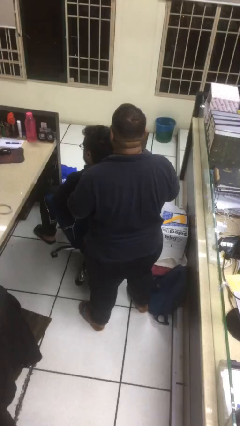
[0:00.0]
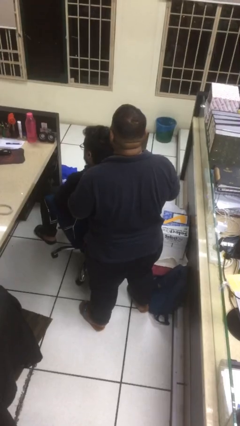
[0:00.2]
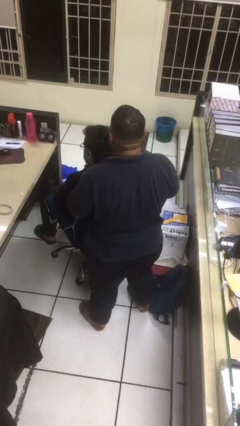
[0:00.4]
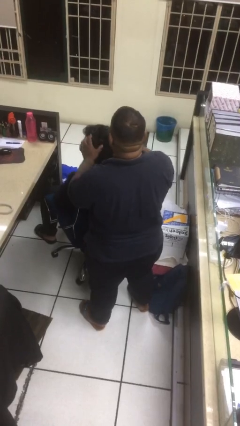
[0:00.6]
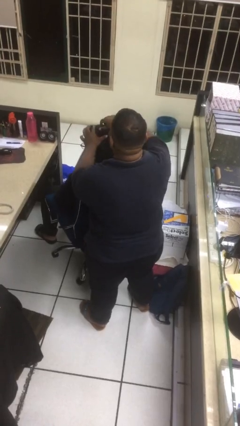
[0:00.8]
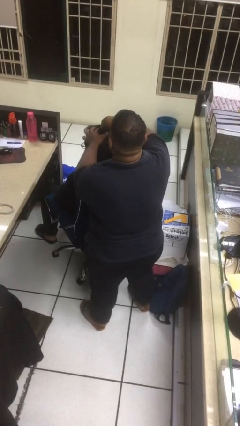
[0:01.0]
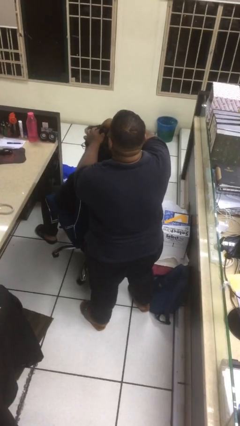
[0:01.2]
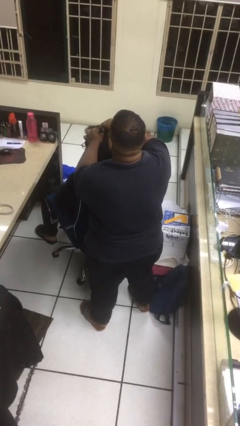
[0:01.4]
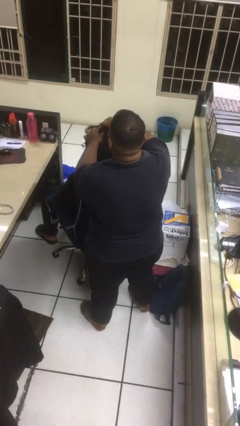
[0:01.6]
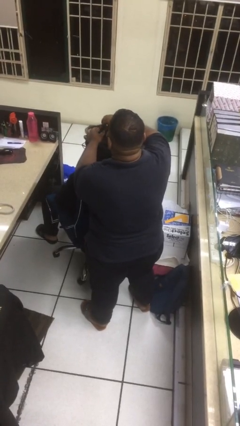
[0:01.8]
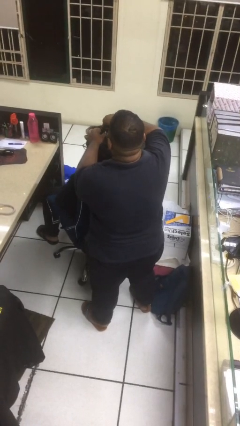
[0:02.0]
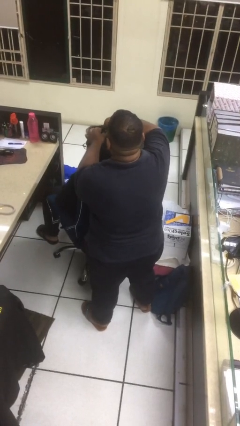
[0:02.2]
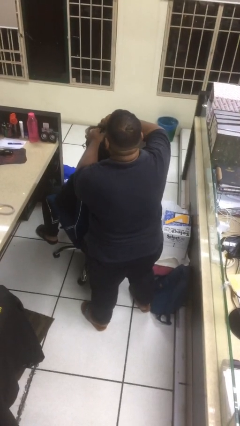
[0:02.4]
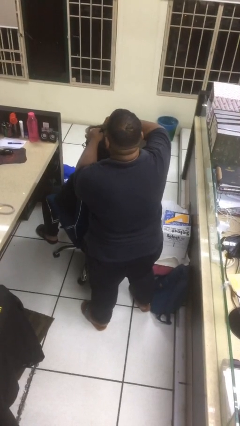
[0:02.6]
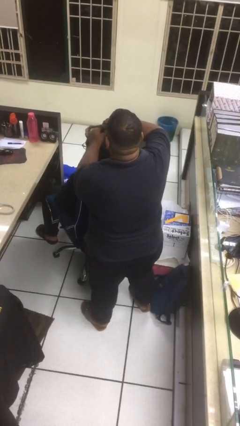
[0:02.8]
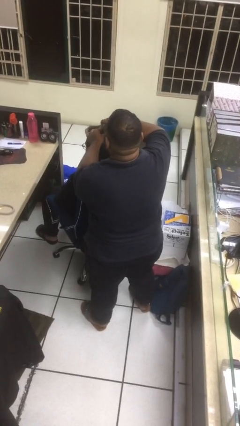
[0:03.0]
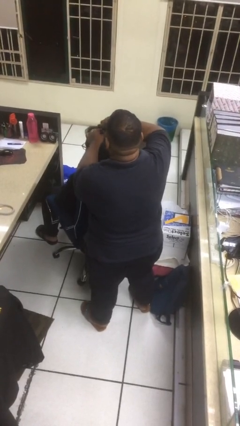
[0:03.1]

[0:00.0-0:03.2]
person braids hair of person

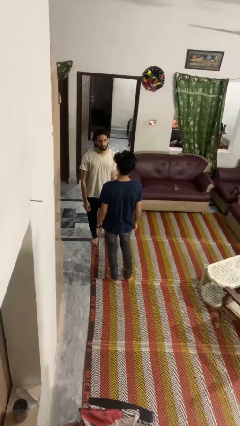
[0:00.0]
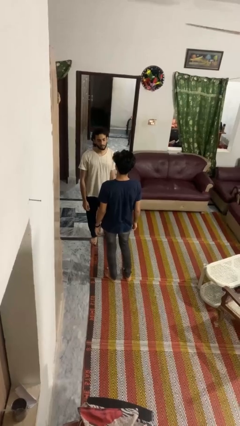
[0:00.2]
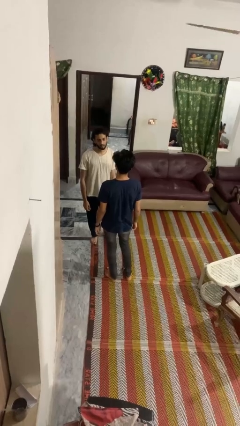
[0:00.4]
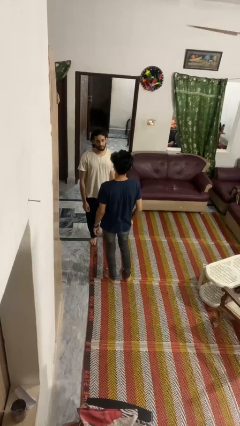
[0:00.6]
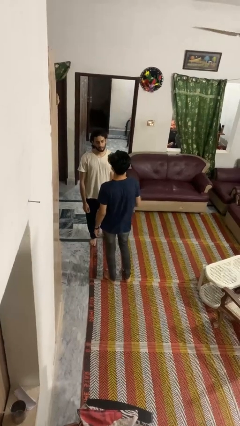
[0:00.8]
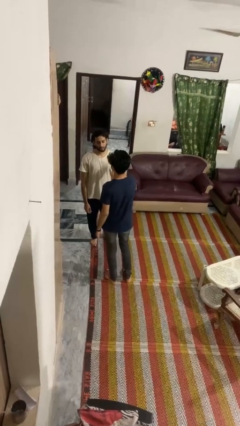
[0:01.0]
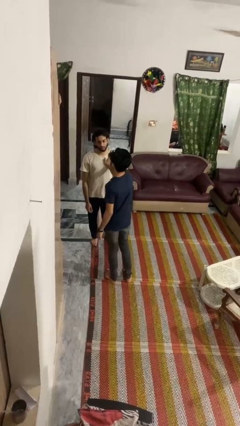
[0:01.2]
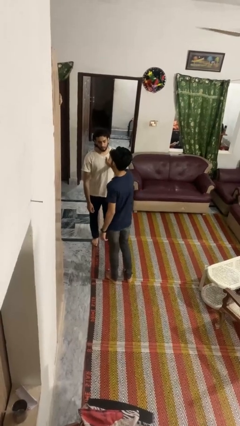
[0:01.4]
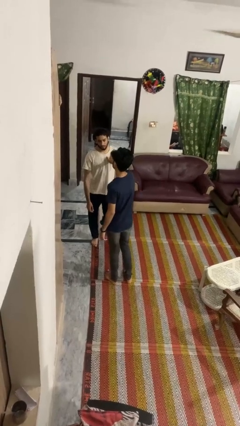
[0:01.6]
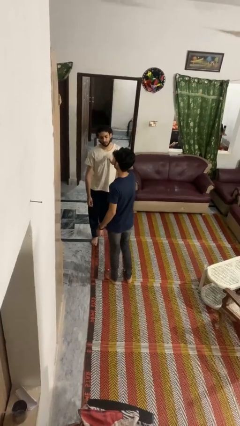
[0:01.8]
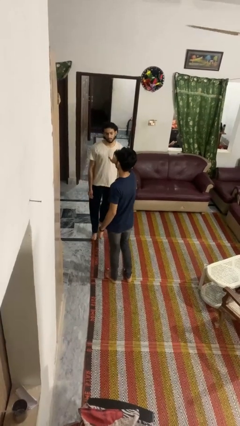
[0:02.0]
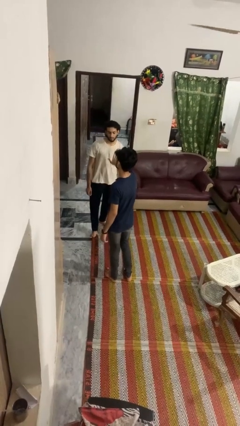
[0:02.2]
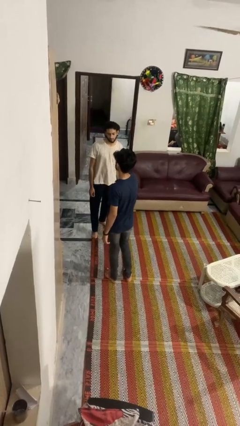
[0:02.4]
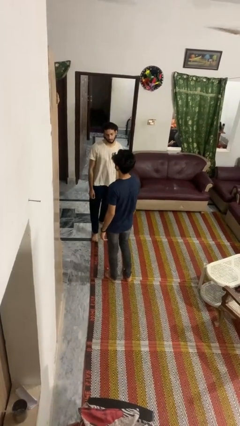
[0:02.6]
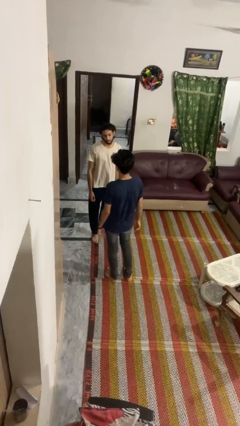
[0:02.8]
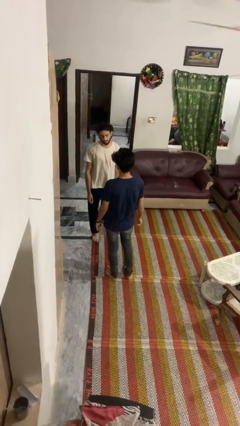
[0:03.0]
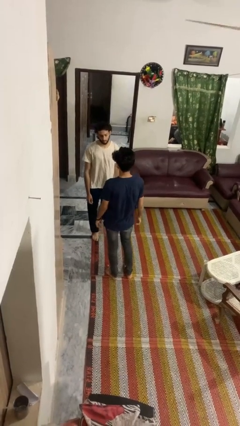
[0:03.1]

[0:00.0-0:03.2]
person shoves person

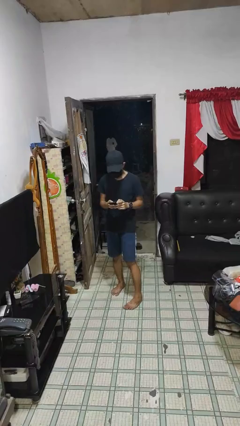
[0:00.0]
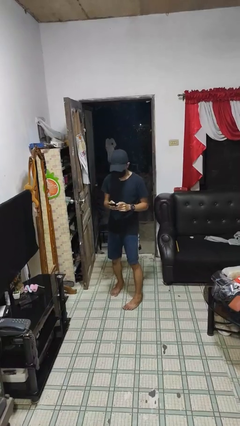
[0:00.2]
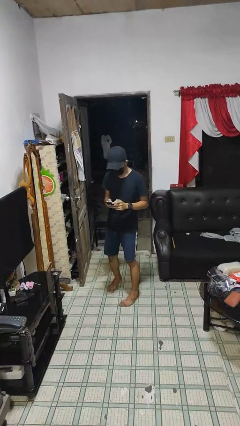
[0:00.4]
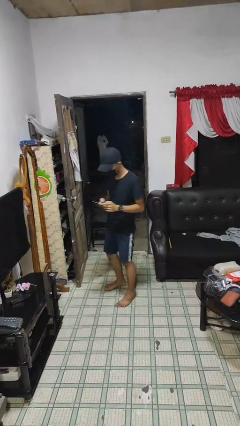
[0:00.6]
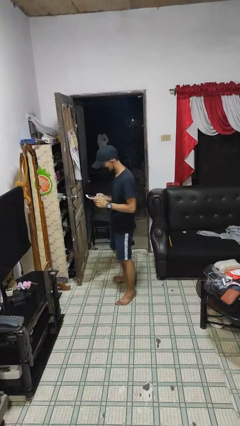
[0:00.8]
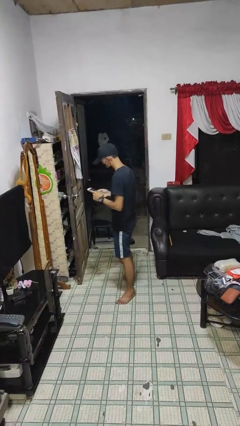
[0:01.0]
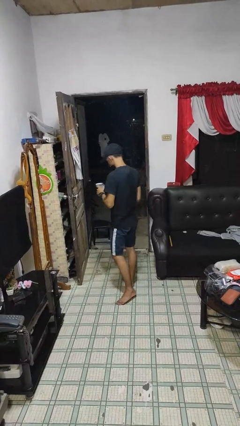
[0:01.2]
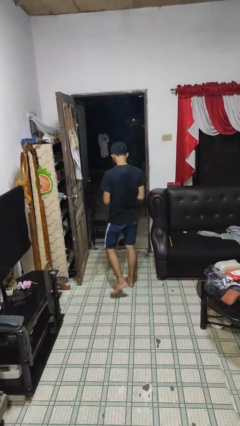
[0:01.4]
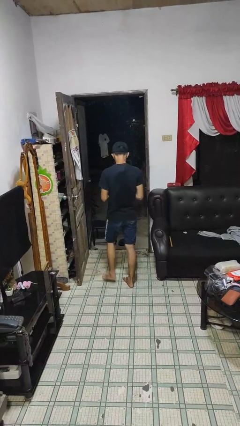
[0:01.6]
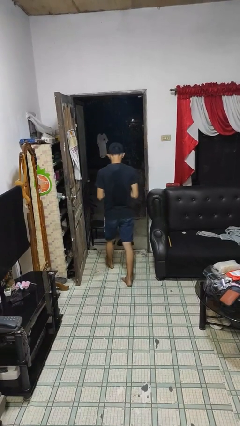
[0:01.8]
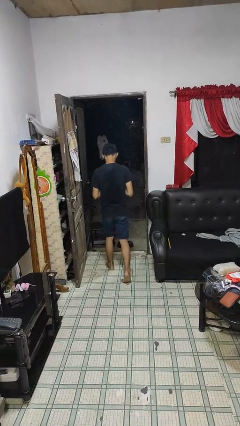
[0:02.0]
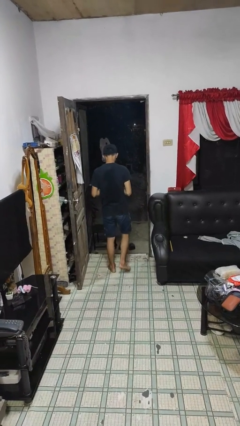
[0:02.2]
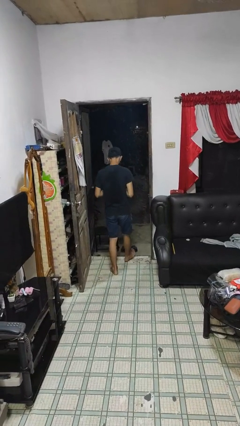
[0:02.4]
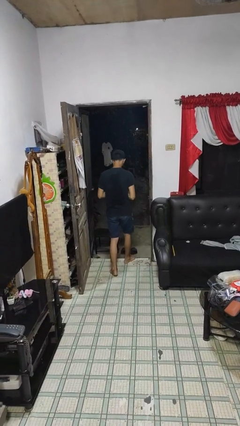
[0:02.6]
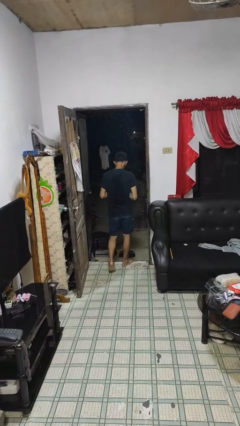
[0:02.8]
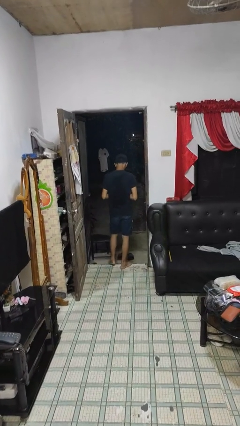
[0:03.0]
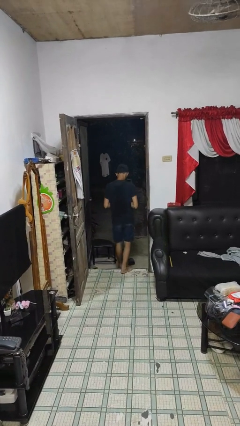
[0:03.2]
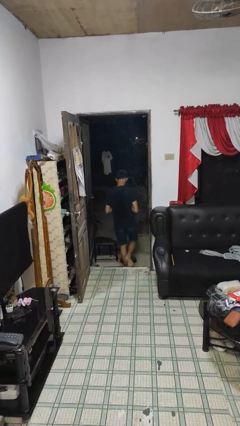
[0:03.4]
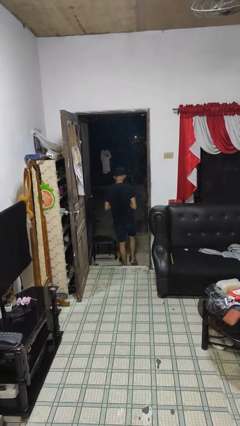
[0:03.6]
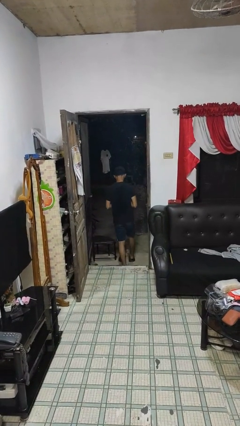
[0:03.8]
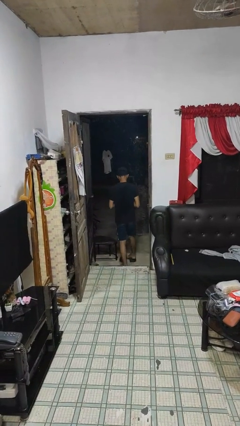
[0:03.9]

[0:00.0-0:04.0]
person exits scene through structure

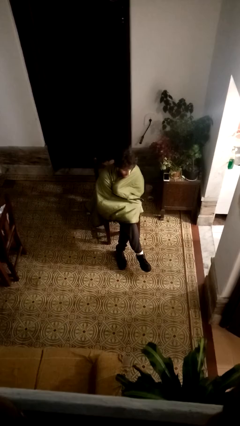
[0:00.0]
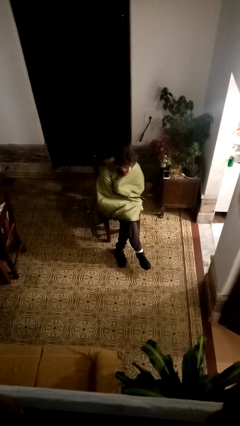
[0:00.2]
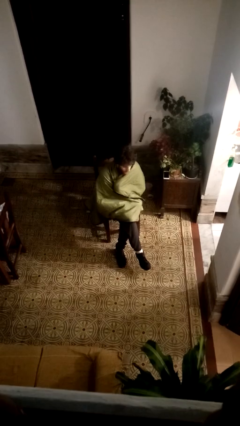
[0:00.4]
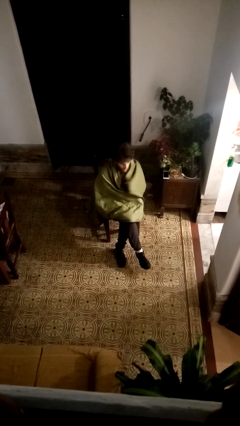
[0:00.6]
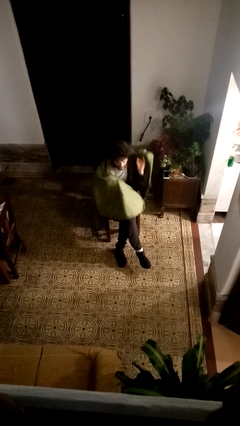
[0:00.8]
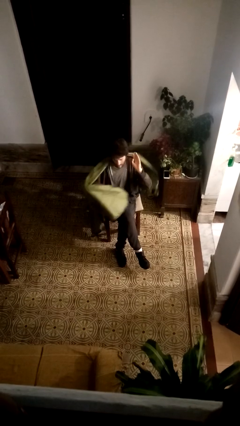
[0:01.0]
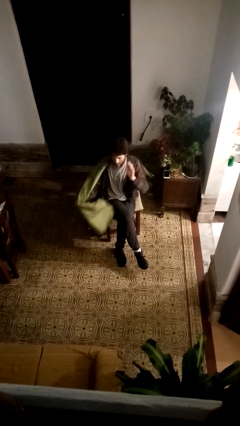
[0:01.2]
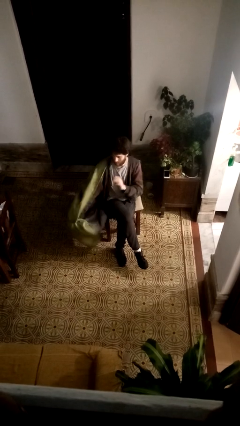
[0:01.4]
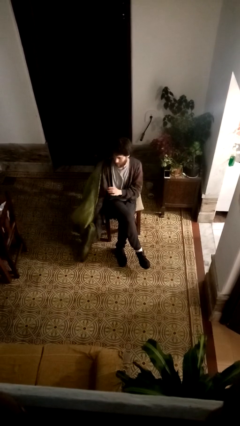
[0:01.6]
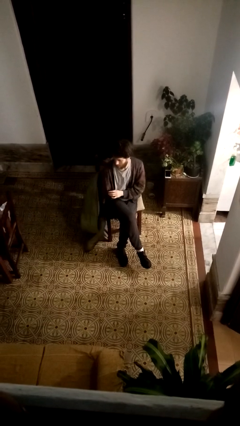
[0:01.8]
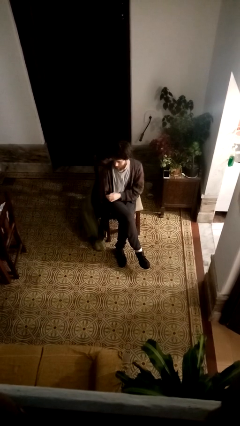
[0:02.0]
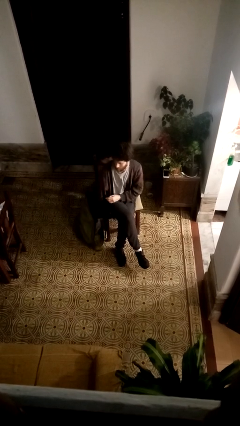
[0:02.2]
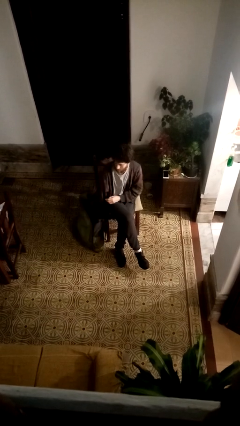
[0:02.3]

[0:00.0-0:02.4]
person uncovers with blanket

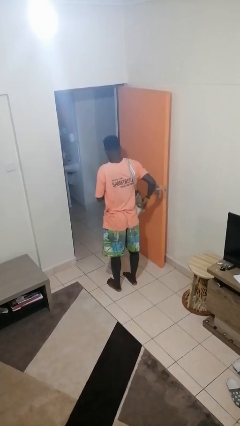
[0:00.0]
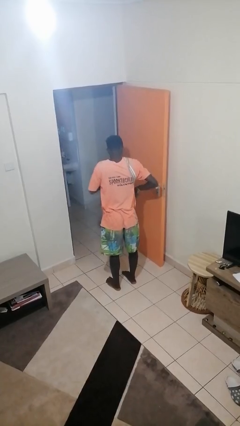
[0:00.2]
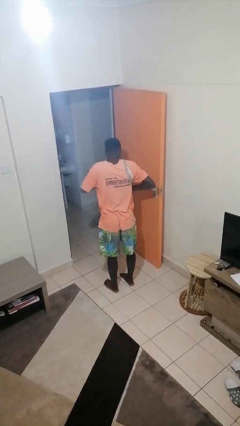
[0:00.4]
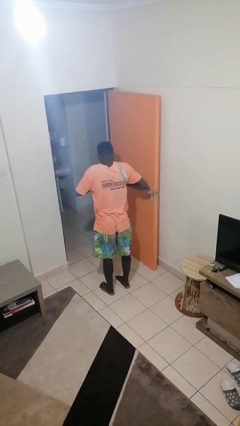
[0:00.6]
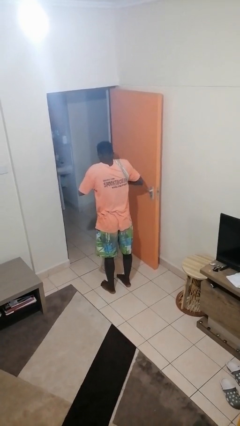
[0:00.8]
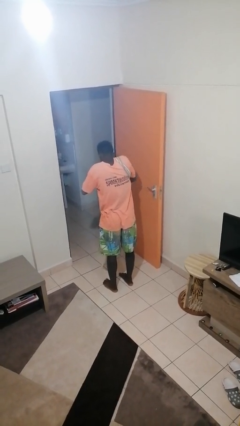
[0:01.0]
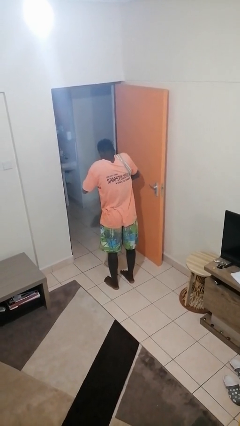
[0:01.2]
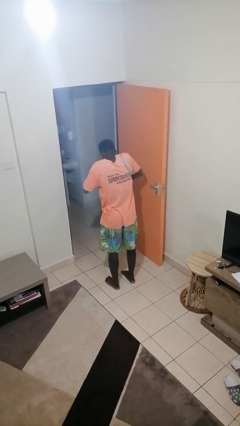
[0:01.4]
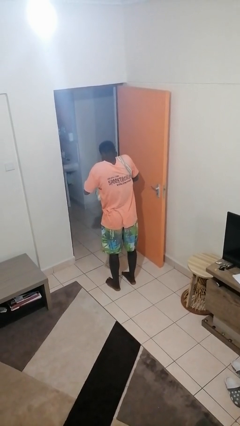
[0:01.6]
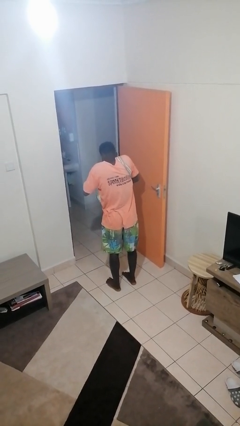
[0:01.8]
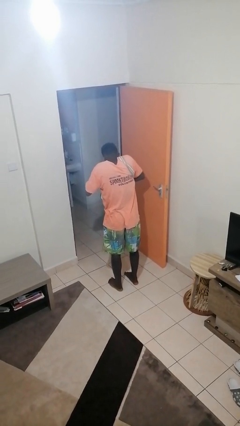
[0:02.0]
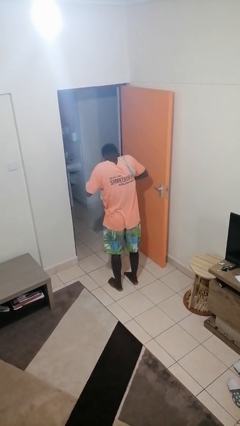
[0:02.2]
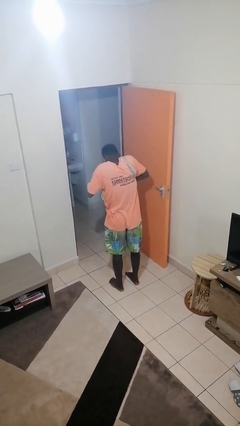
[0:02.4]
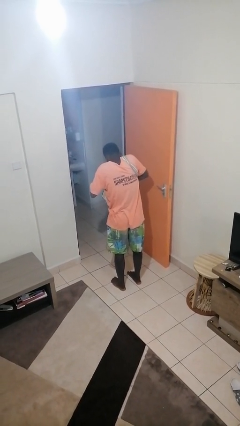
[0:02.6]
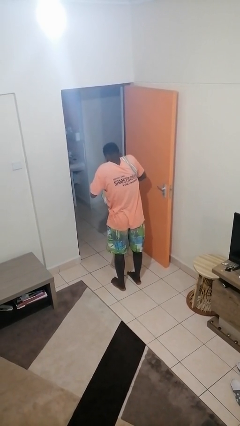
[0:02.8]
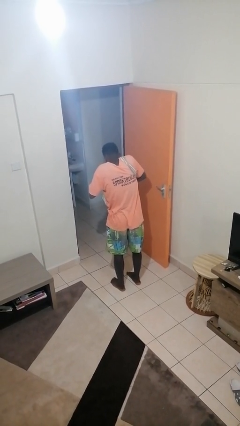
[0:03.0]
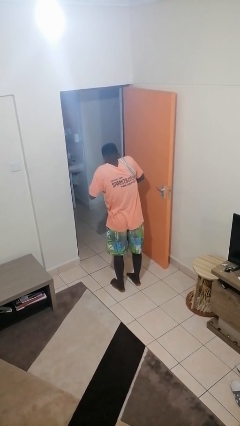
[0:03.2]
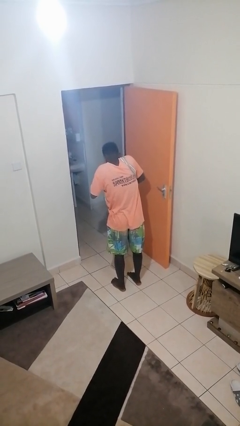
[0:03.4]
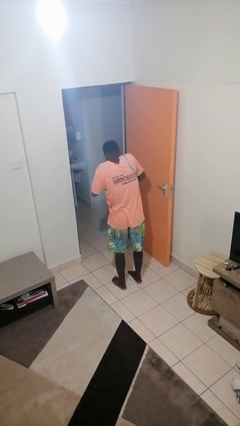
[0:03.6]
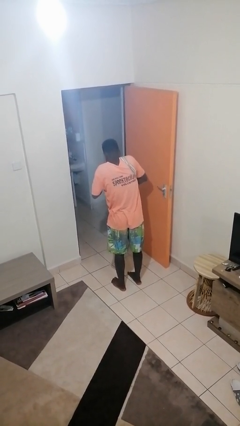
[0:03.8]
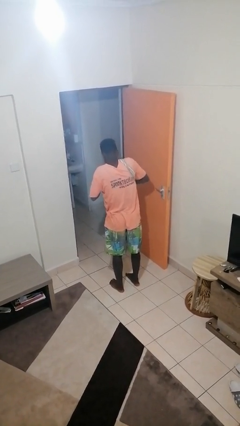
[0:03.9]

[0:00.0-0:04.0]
person searches in purse

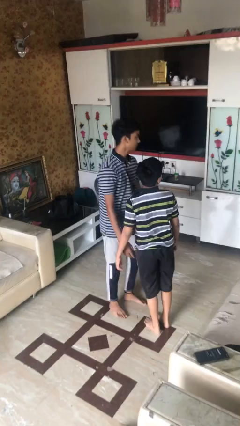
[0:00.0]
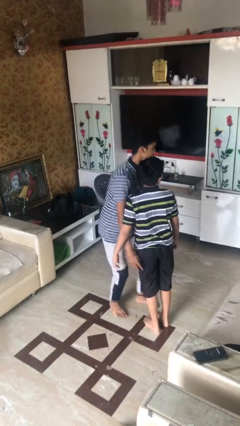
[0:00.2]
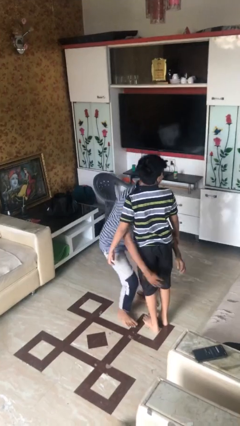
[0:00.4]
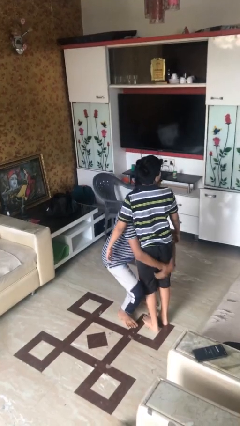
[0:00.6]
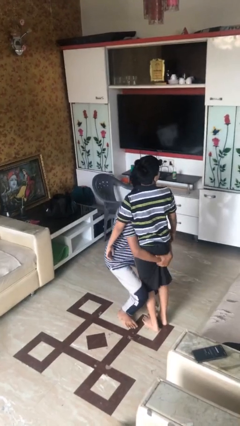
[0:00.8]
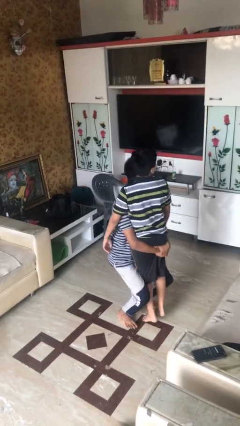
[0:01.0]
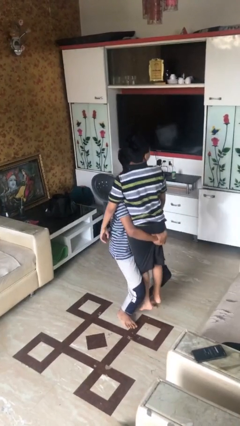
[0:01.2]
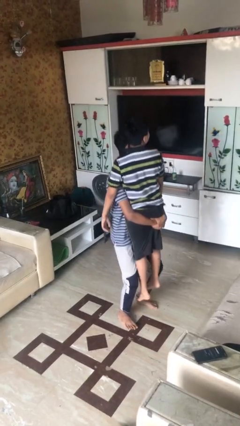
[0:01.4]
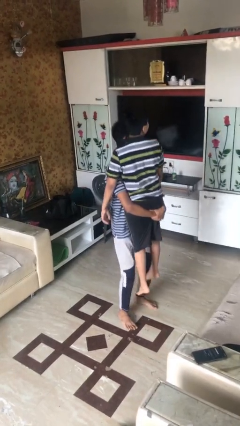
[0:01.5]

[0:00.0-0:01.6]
person picks up person
